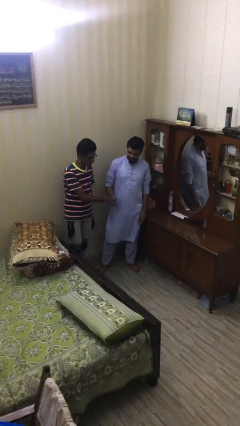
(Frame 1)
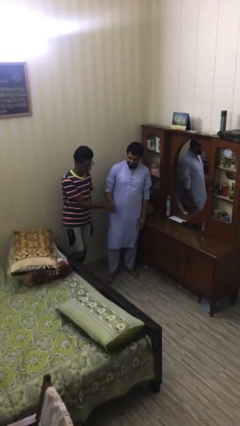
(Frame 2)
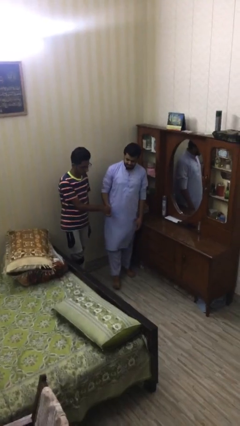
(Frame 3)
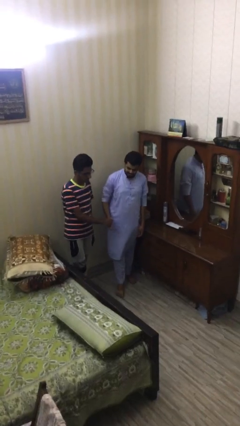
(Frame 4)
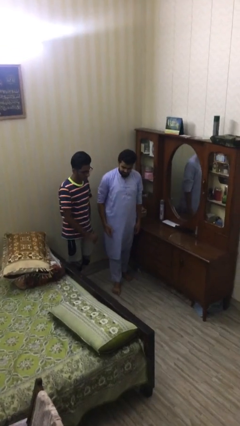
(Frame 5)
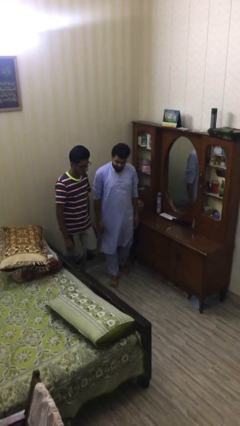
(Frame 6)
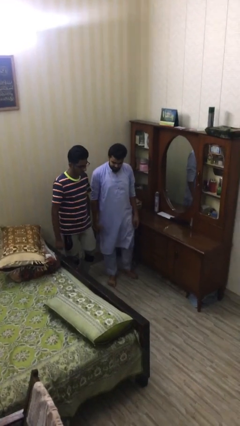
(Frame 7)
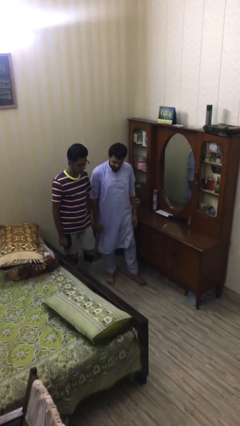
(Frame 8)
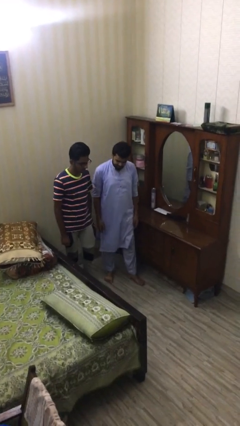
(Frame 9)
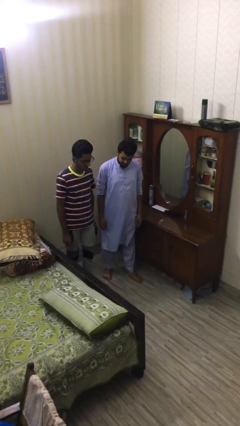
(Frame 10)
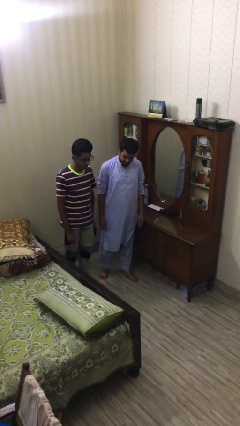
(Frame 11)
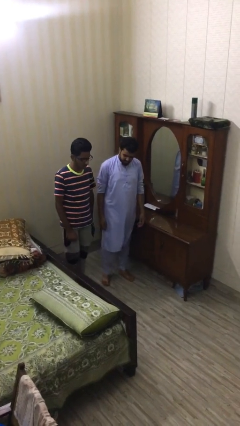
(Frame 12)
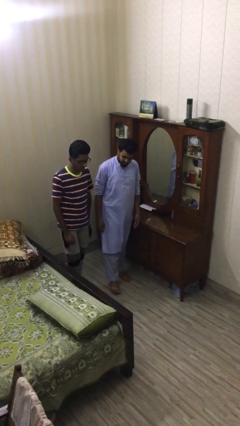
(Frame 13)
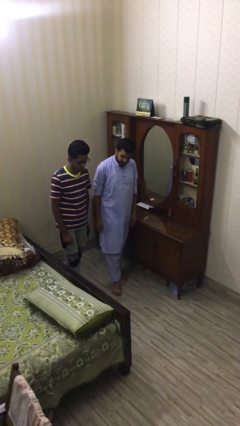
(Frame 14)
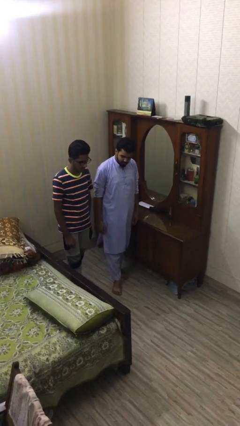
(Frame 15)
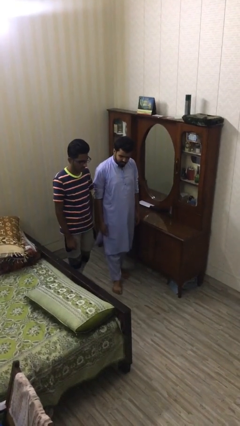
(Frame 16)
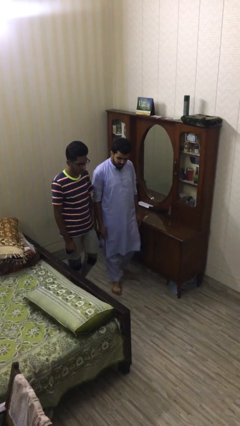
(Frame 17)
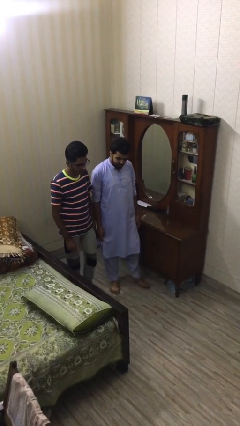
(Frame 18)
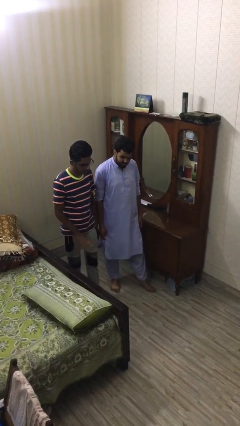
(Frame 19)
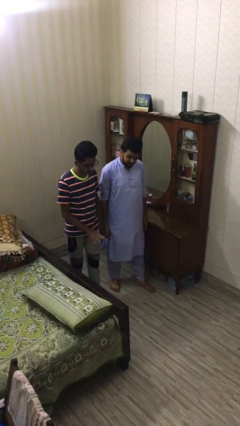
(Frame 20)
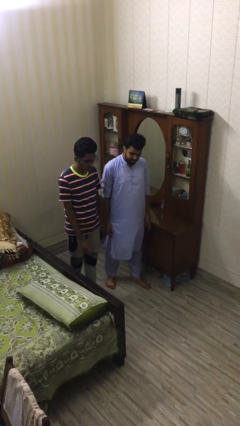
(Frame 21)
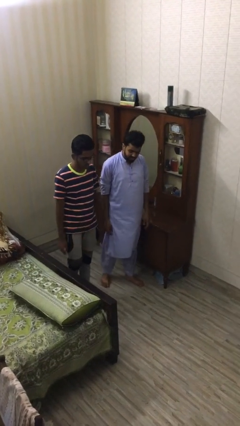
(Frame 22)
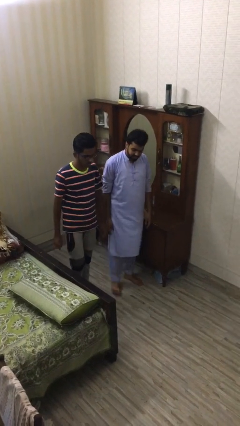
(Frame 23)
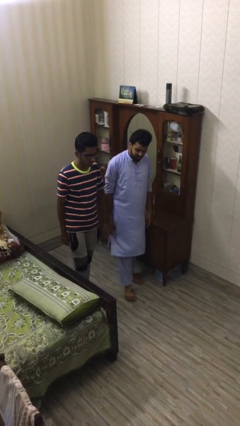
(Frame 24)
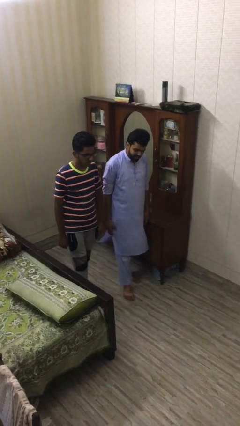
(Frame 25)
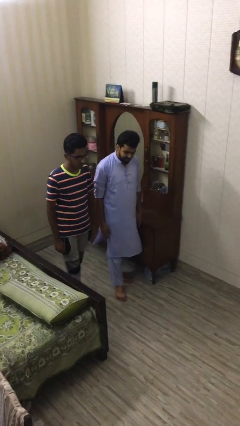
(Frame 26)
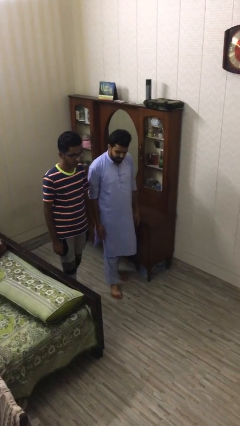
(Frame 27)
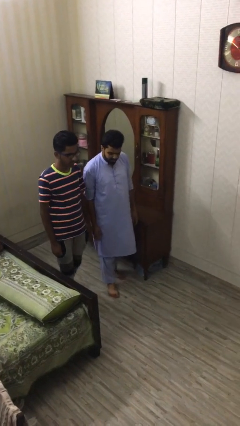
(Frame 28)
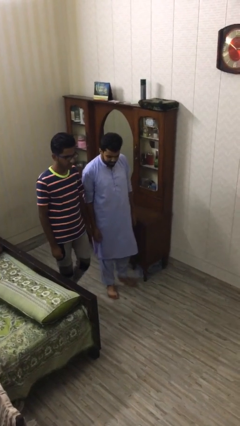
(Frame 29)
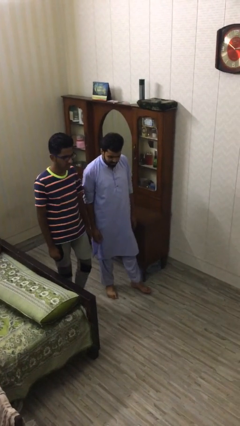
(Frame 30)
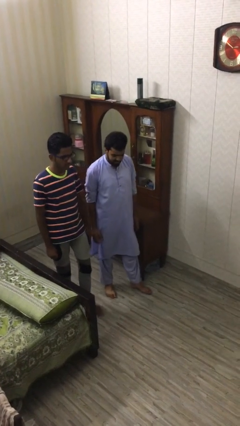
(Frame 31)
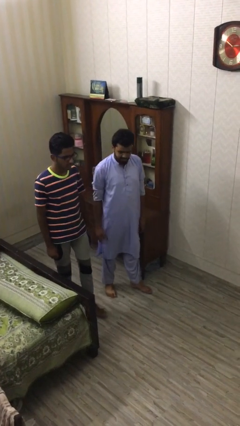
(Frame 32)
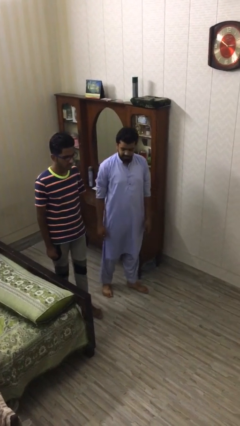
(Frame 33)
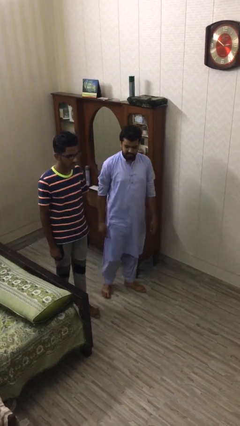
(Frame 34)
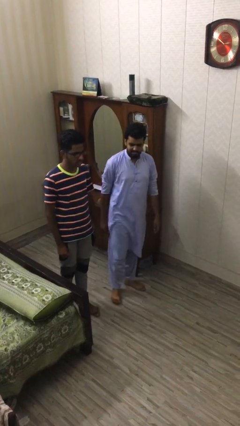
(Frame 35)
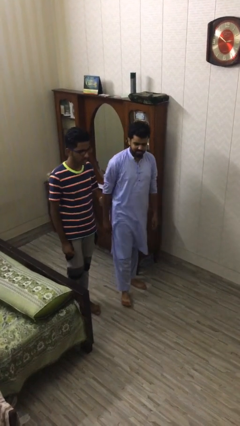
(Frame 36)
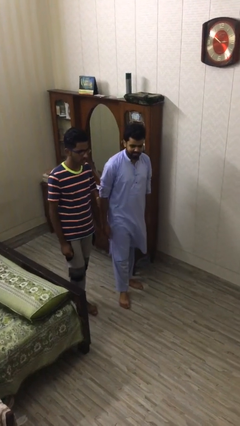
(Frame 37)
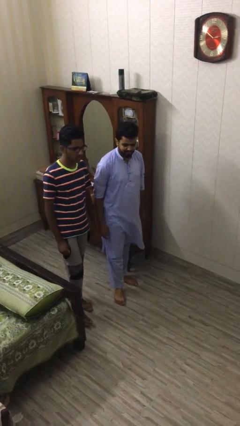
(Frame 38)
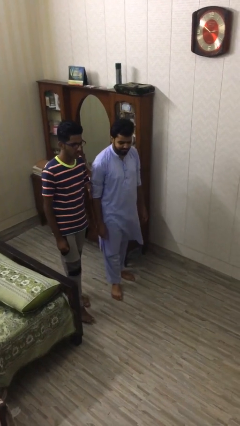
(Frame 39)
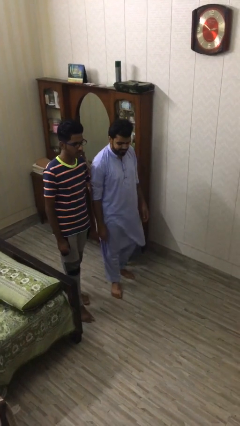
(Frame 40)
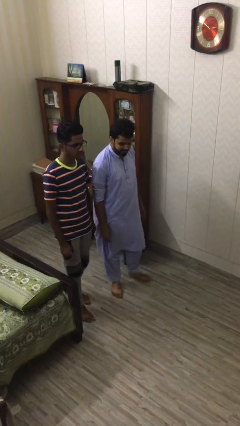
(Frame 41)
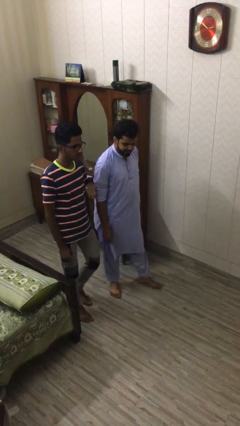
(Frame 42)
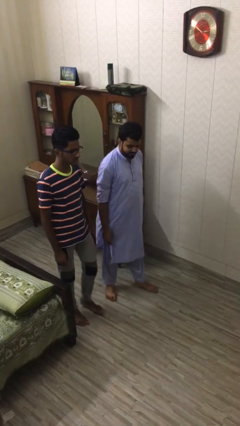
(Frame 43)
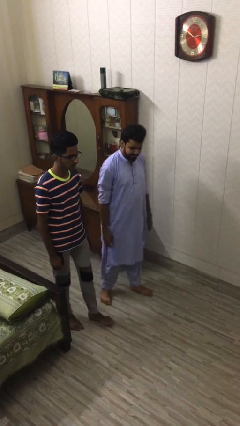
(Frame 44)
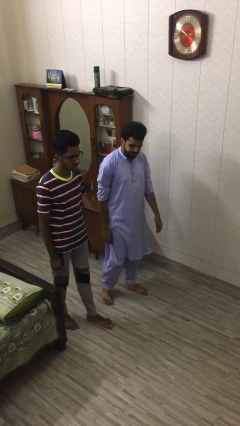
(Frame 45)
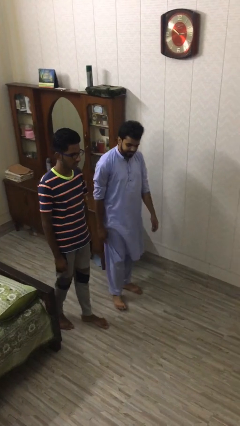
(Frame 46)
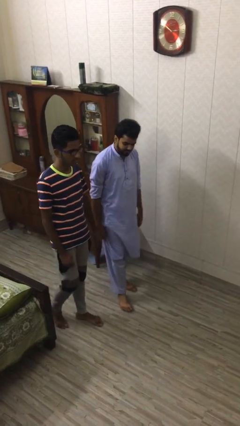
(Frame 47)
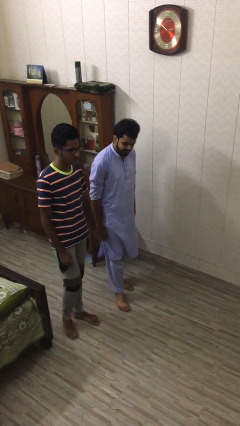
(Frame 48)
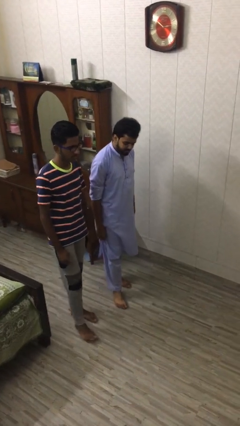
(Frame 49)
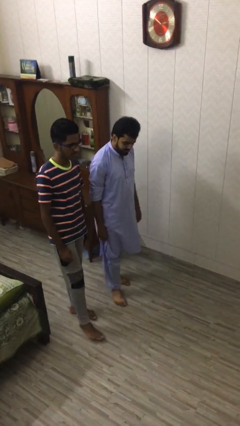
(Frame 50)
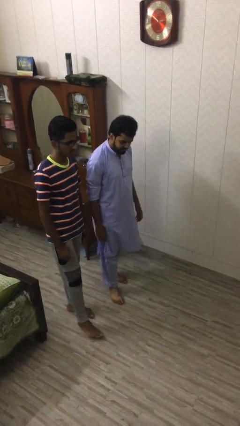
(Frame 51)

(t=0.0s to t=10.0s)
person talks to person

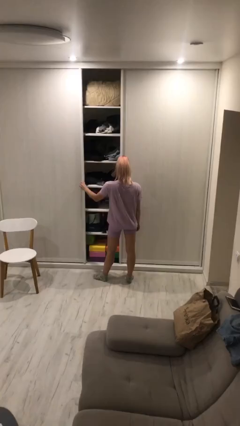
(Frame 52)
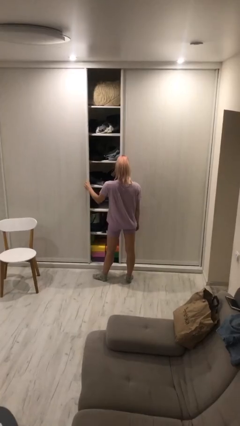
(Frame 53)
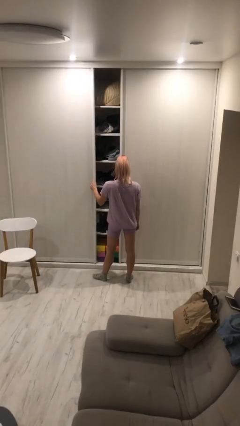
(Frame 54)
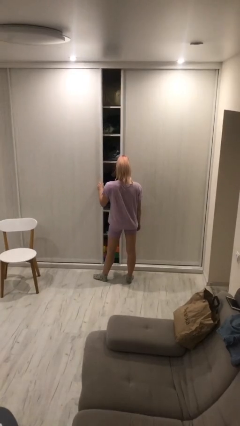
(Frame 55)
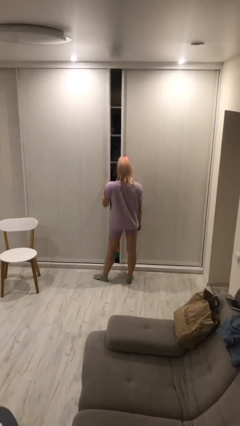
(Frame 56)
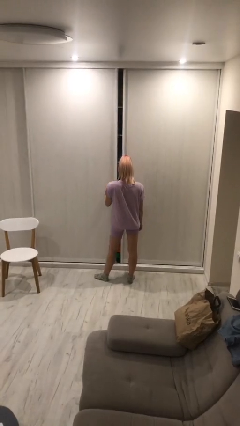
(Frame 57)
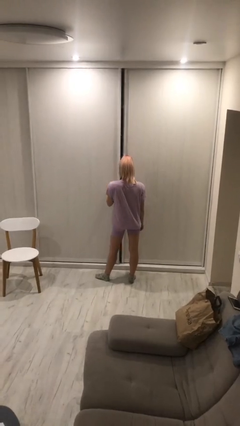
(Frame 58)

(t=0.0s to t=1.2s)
person closes sliding door

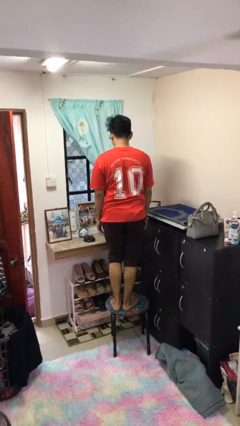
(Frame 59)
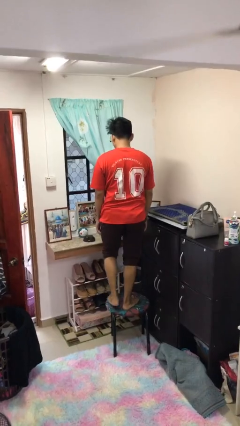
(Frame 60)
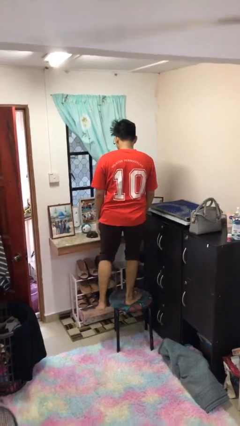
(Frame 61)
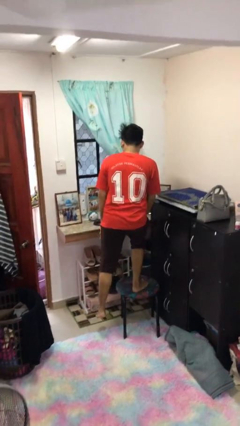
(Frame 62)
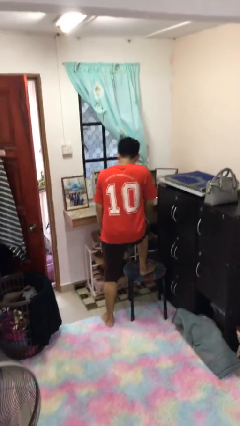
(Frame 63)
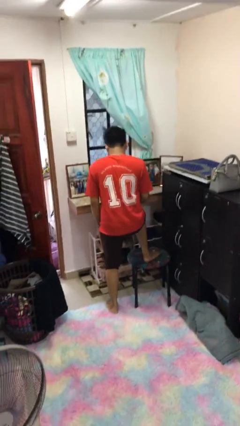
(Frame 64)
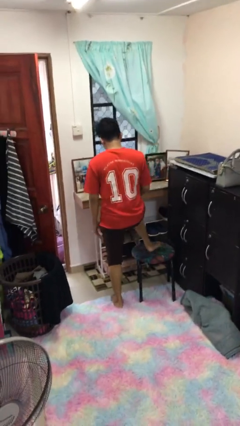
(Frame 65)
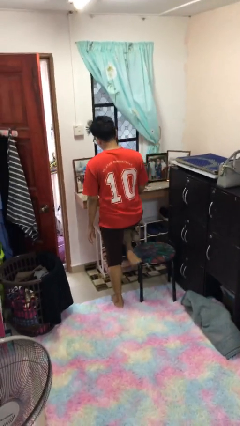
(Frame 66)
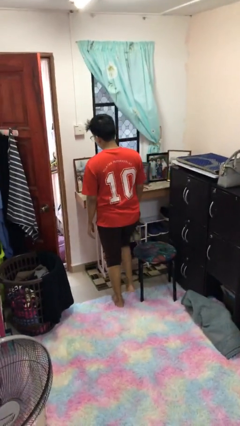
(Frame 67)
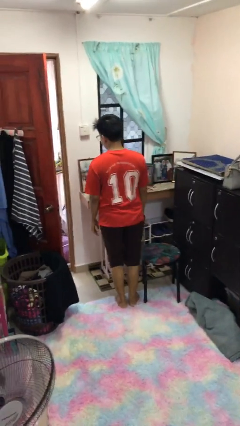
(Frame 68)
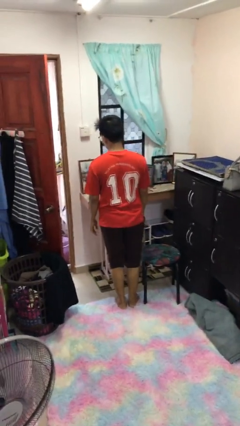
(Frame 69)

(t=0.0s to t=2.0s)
person climbs off chair

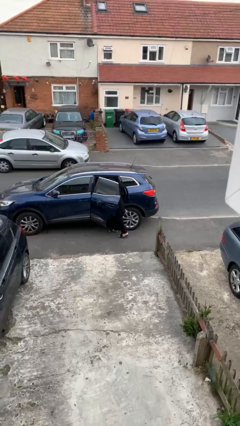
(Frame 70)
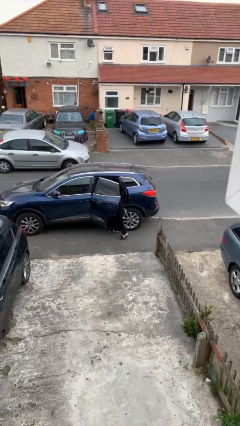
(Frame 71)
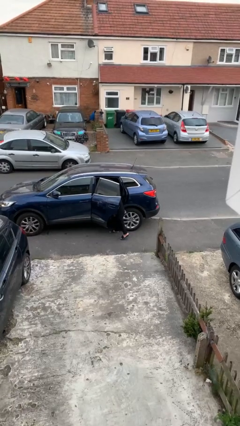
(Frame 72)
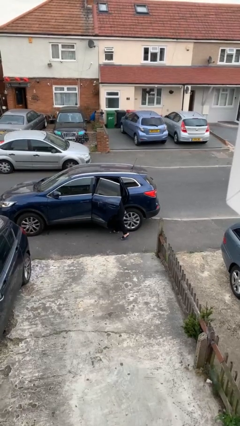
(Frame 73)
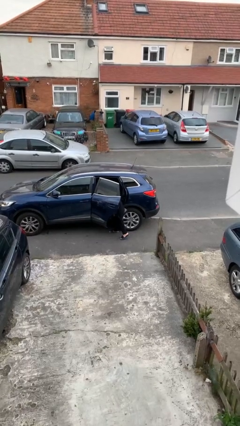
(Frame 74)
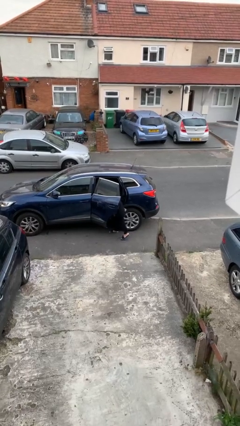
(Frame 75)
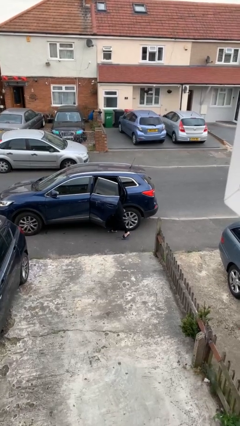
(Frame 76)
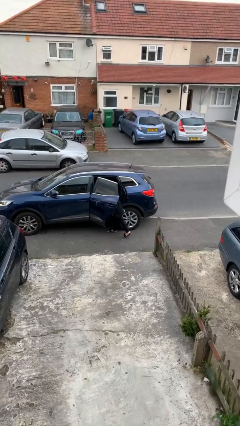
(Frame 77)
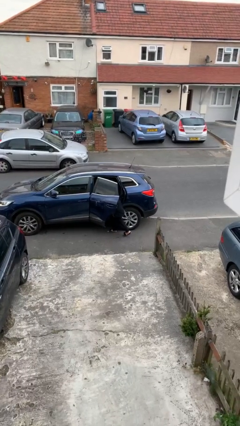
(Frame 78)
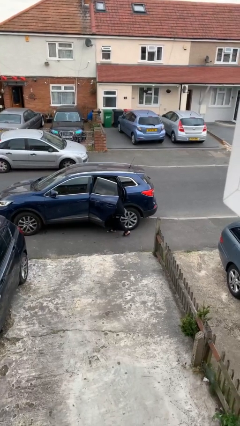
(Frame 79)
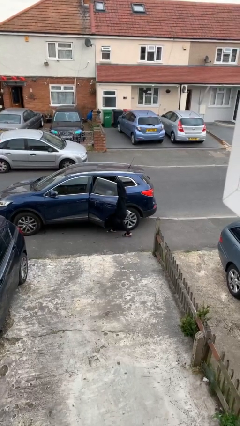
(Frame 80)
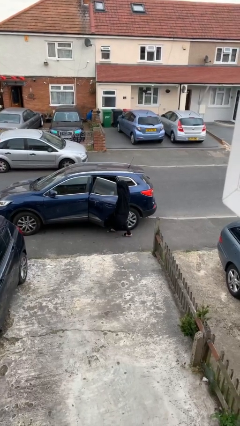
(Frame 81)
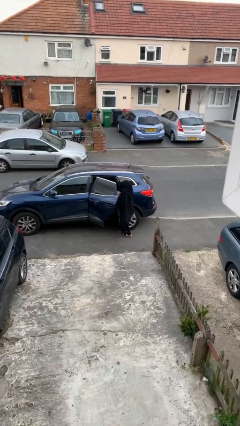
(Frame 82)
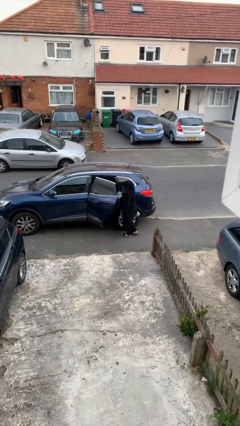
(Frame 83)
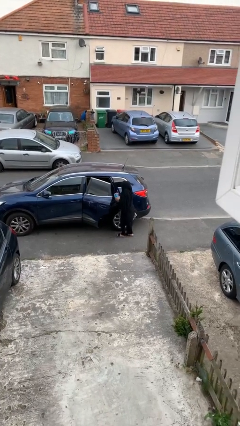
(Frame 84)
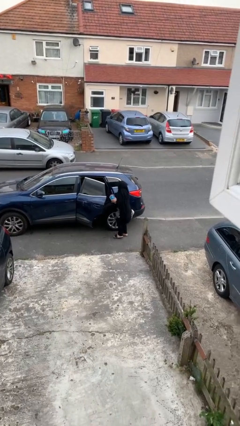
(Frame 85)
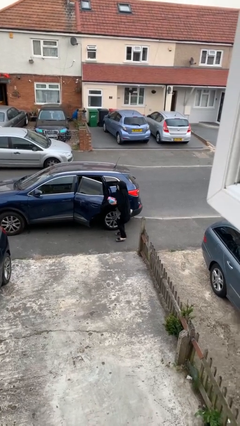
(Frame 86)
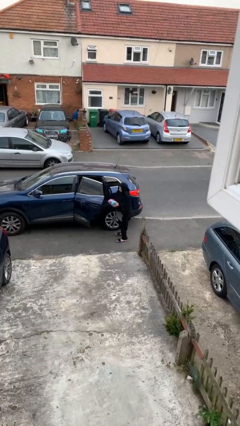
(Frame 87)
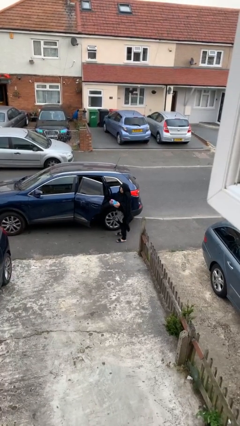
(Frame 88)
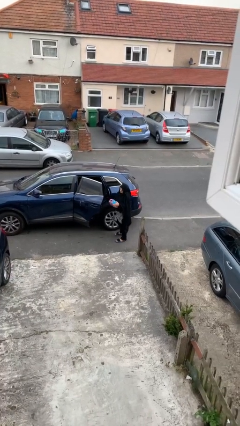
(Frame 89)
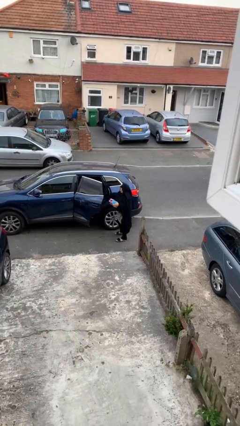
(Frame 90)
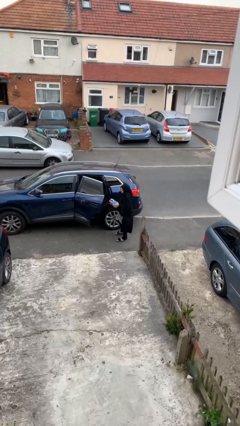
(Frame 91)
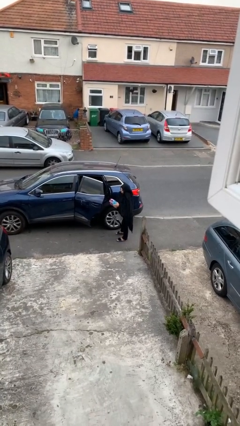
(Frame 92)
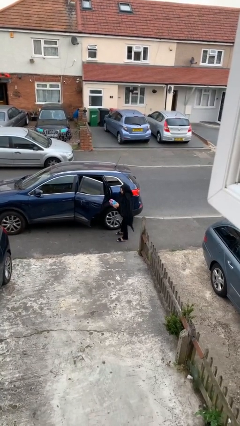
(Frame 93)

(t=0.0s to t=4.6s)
person unloads car
